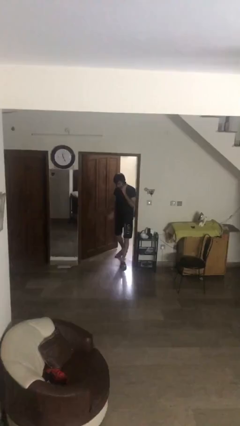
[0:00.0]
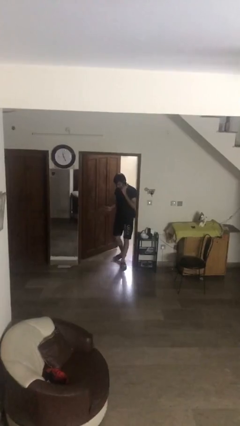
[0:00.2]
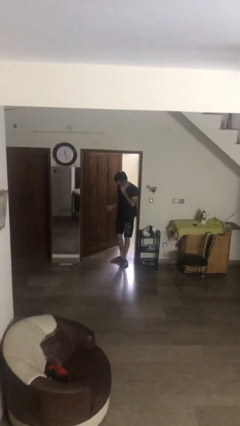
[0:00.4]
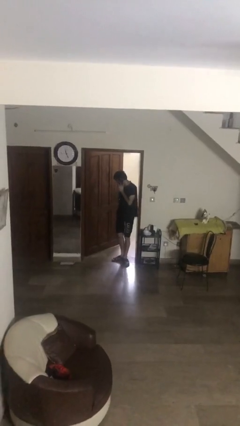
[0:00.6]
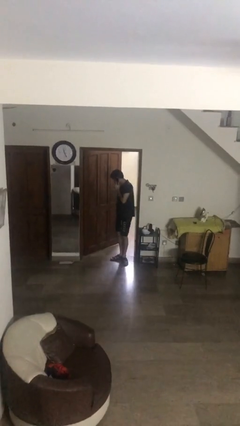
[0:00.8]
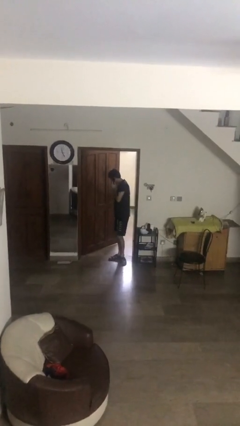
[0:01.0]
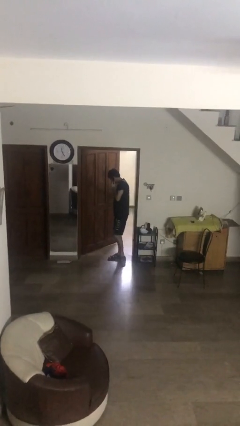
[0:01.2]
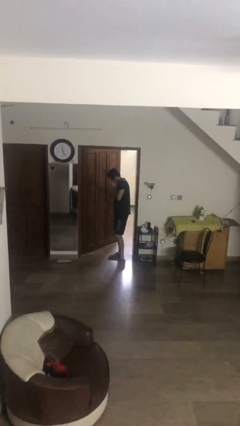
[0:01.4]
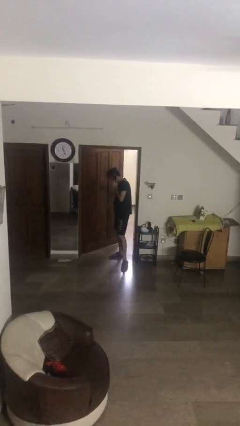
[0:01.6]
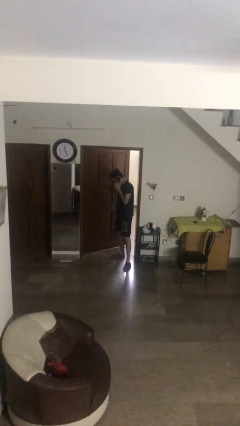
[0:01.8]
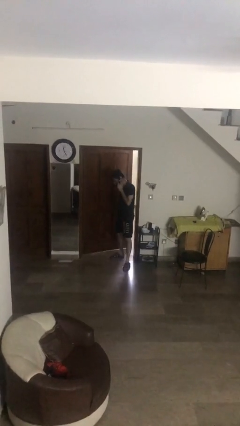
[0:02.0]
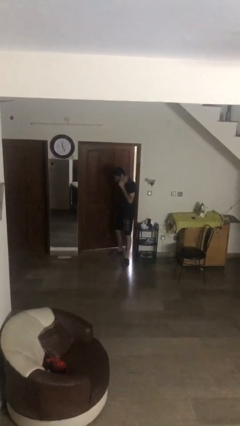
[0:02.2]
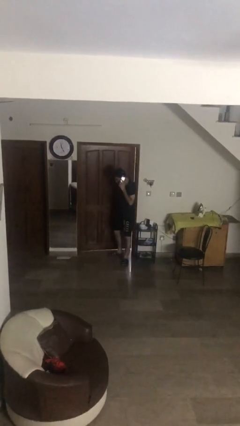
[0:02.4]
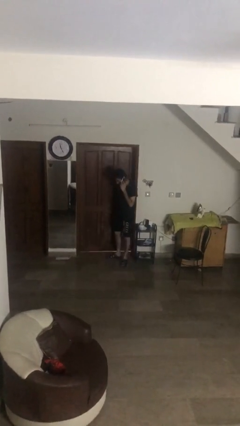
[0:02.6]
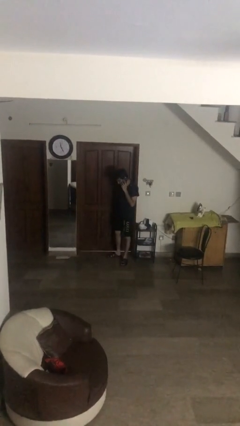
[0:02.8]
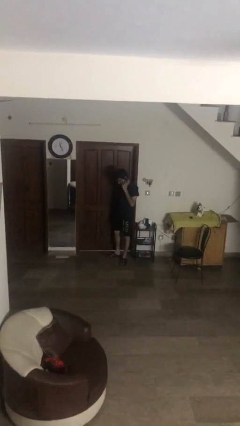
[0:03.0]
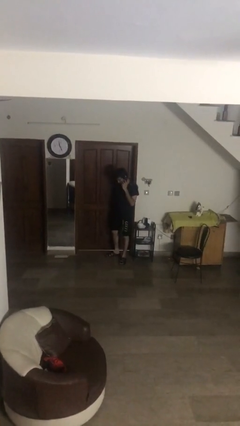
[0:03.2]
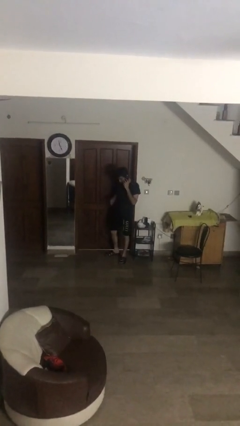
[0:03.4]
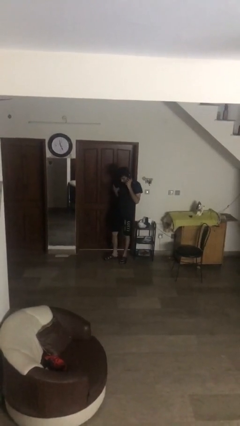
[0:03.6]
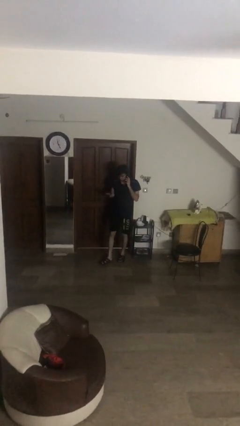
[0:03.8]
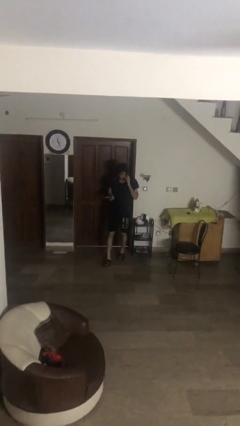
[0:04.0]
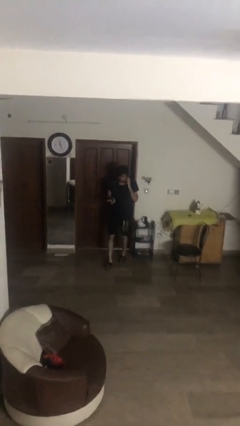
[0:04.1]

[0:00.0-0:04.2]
person closes facility door

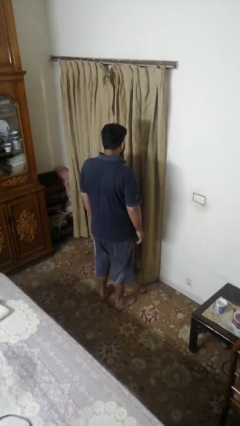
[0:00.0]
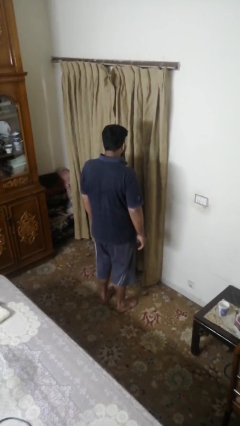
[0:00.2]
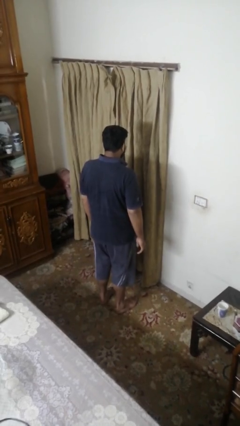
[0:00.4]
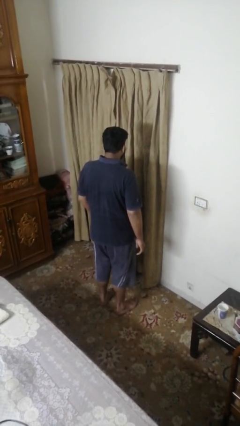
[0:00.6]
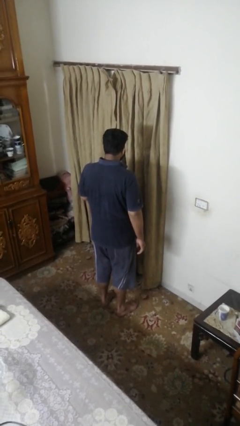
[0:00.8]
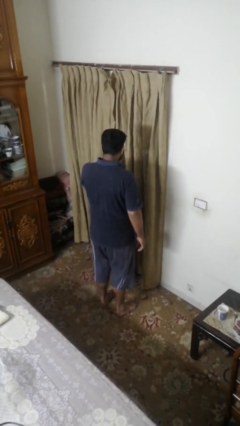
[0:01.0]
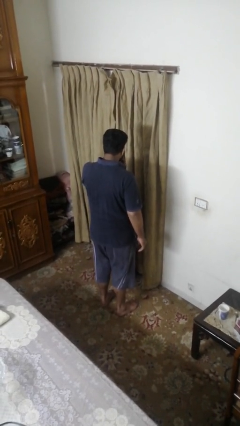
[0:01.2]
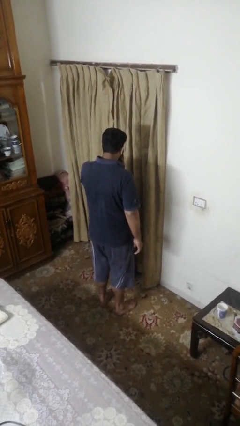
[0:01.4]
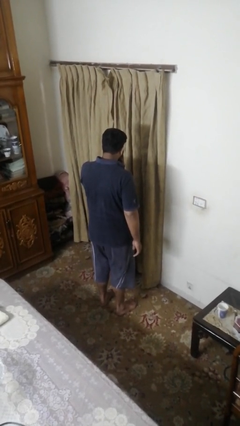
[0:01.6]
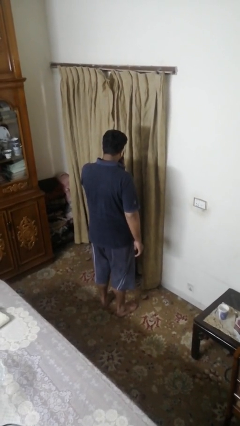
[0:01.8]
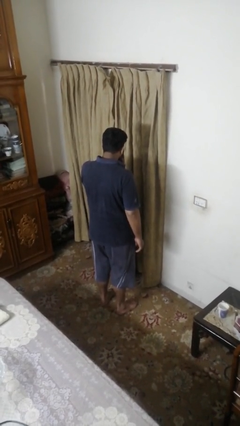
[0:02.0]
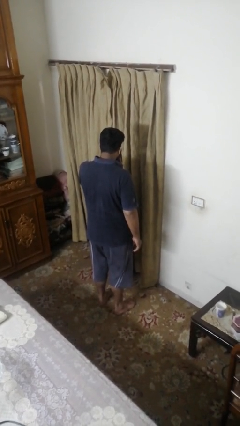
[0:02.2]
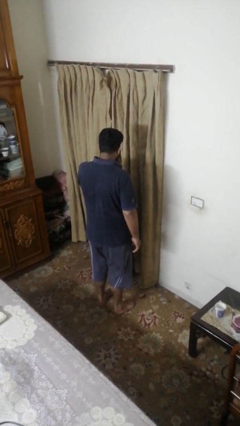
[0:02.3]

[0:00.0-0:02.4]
person gestures be quiet

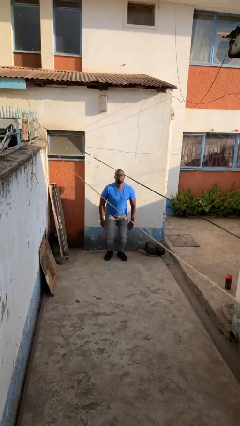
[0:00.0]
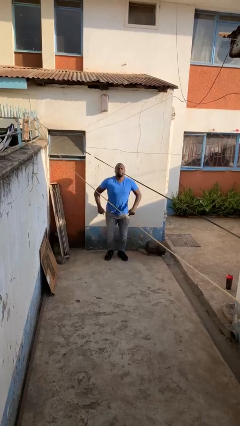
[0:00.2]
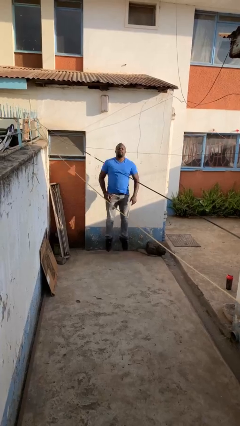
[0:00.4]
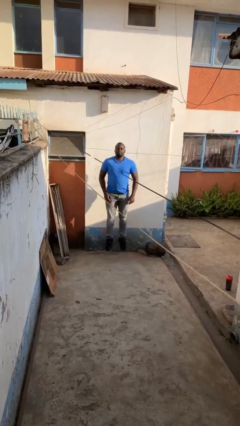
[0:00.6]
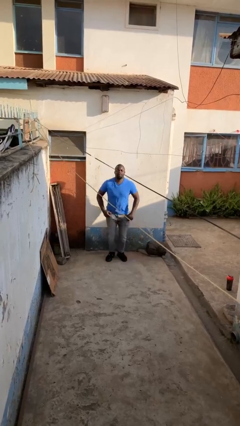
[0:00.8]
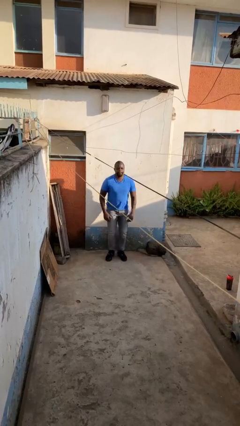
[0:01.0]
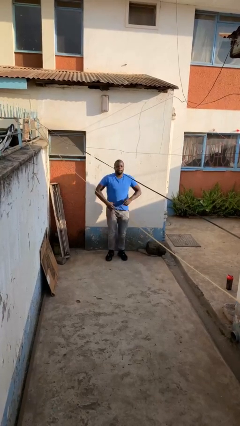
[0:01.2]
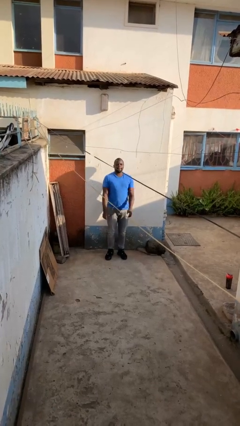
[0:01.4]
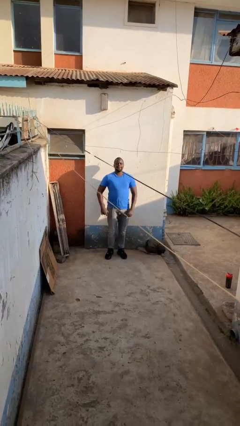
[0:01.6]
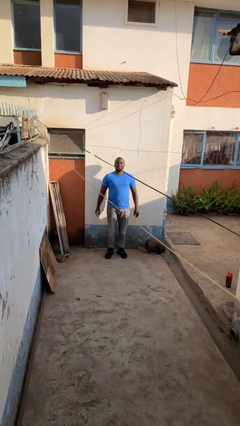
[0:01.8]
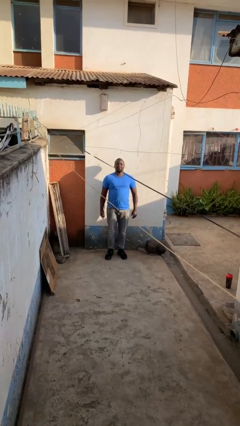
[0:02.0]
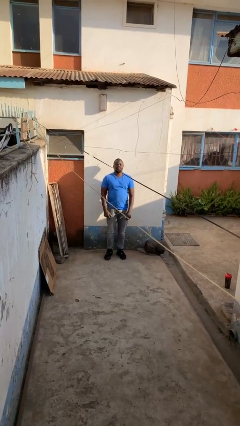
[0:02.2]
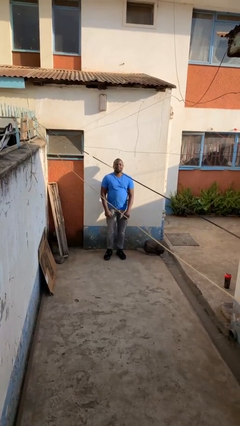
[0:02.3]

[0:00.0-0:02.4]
person jumps

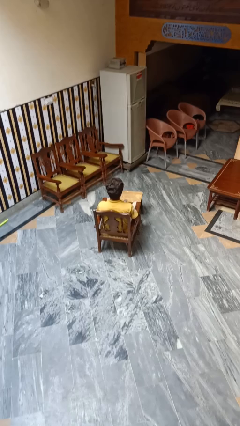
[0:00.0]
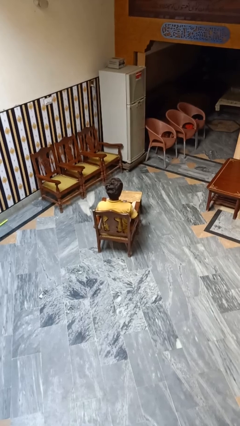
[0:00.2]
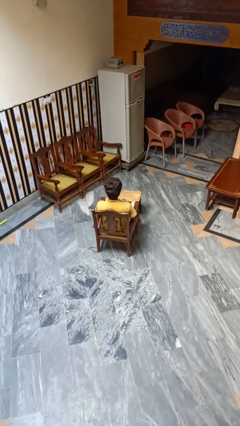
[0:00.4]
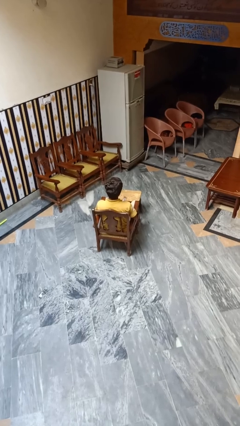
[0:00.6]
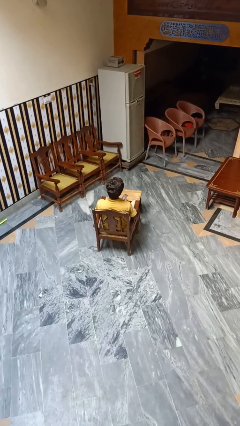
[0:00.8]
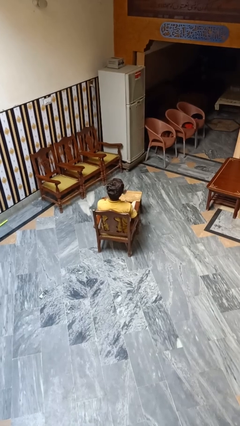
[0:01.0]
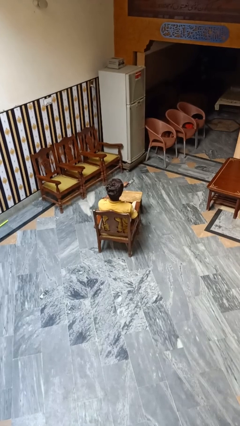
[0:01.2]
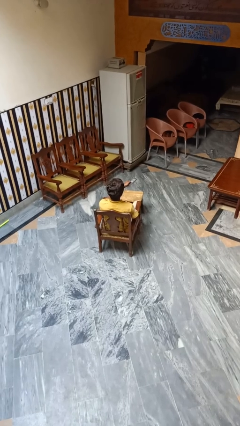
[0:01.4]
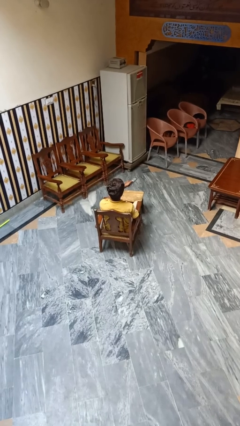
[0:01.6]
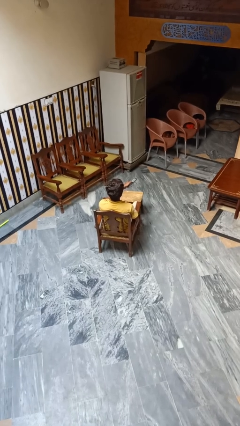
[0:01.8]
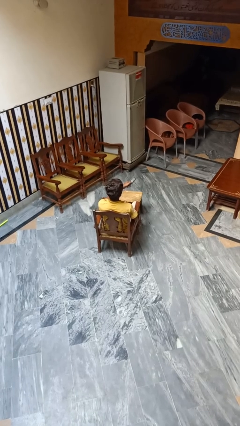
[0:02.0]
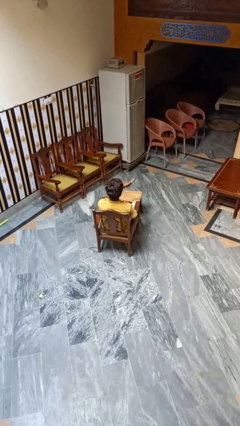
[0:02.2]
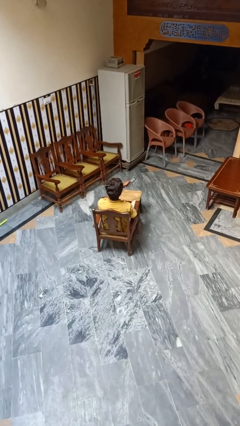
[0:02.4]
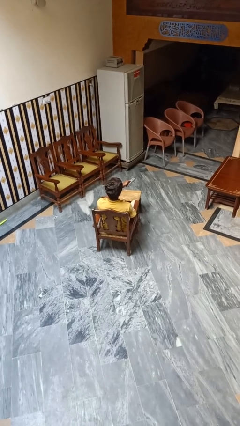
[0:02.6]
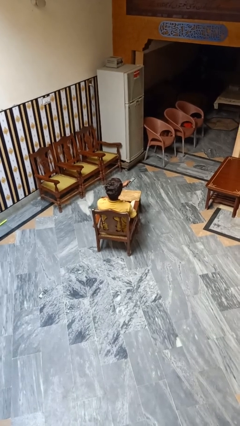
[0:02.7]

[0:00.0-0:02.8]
person uses television remote

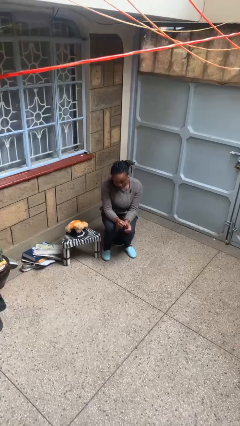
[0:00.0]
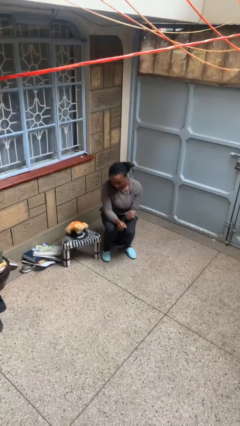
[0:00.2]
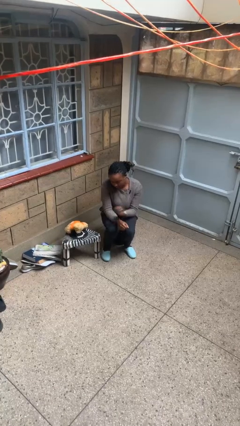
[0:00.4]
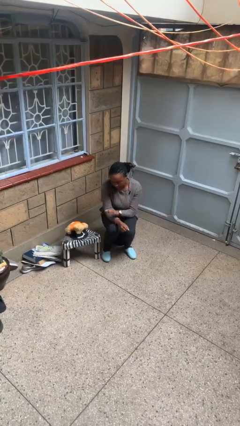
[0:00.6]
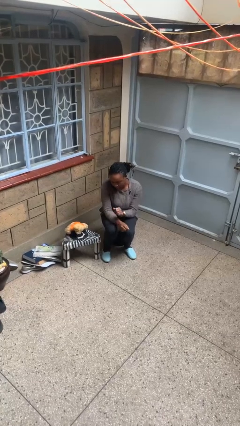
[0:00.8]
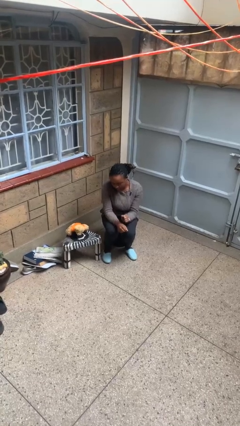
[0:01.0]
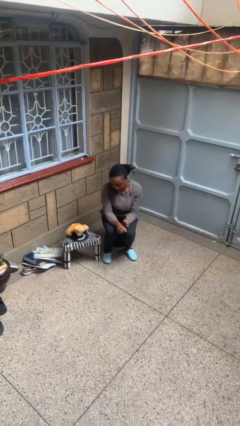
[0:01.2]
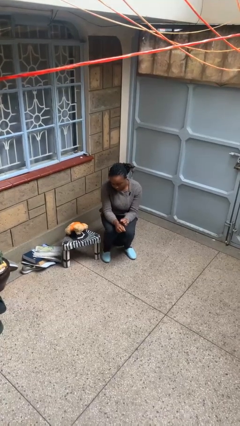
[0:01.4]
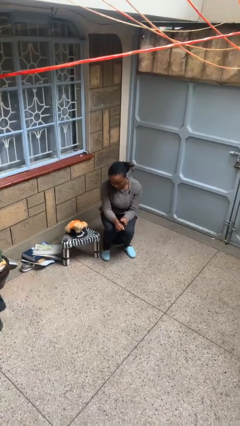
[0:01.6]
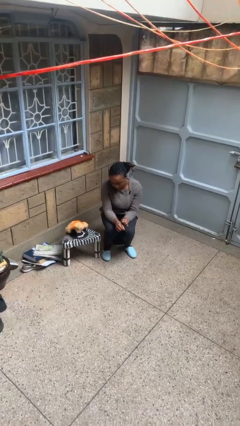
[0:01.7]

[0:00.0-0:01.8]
person swats bug

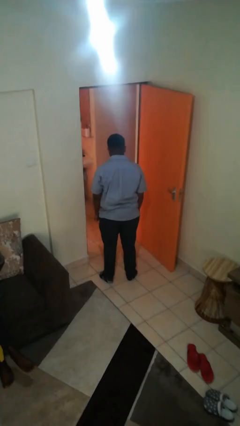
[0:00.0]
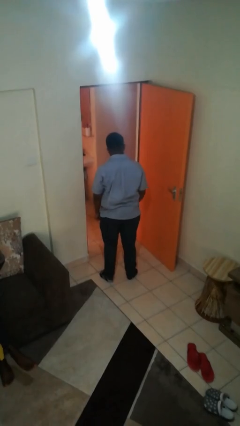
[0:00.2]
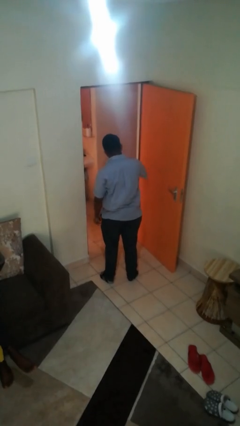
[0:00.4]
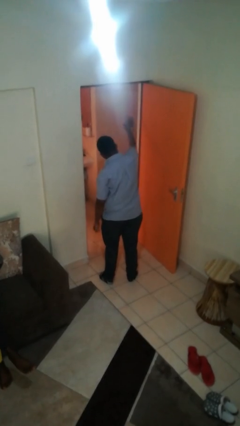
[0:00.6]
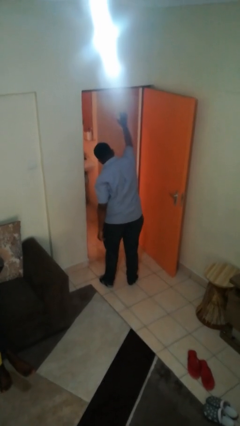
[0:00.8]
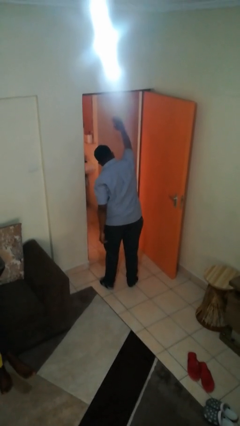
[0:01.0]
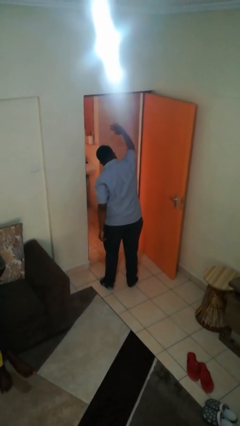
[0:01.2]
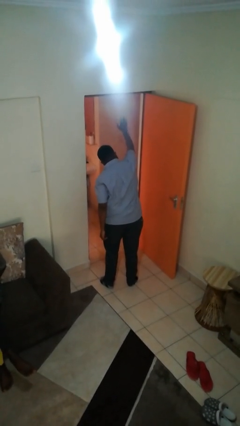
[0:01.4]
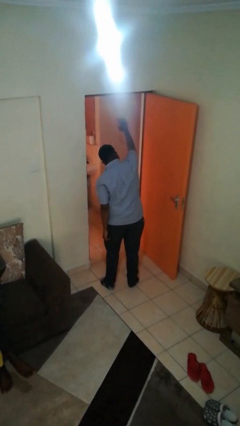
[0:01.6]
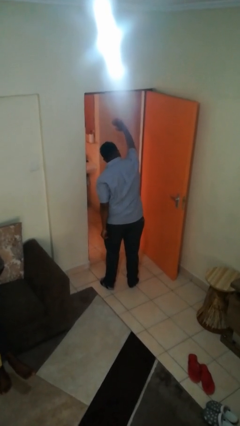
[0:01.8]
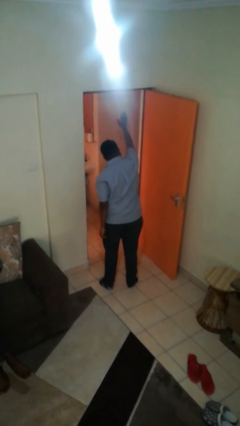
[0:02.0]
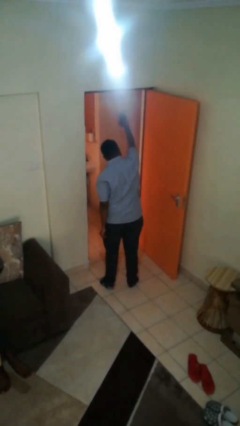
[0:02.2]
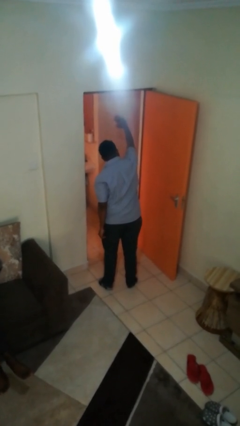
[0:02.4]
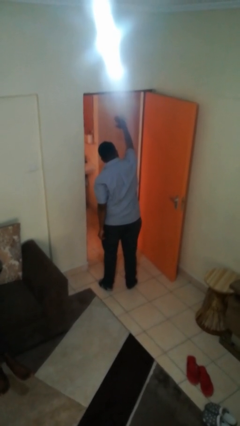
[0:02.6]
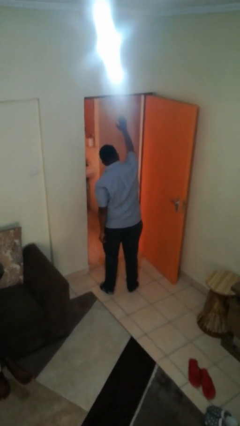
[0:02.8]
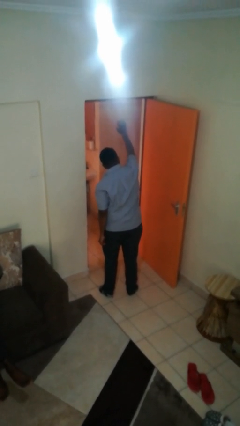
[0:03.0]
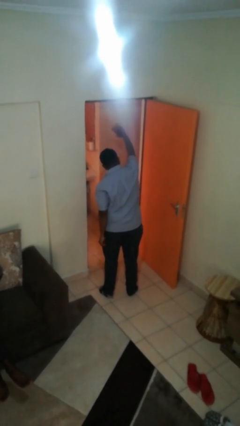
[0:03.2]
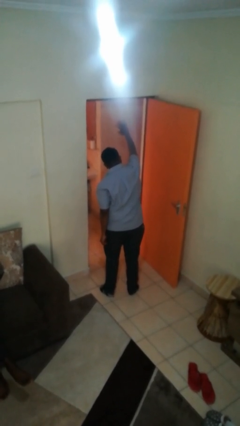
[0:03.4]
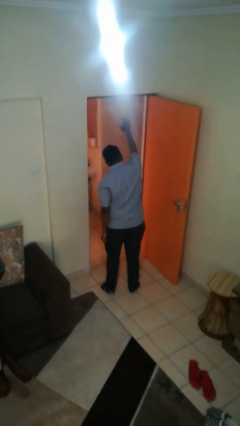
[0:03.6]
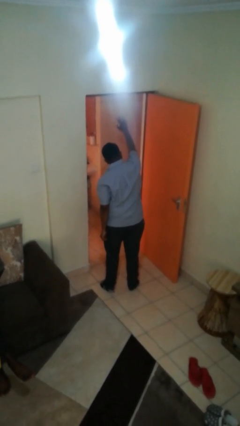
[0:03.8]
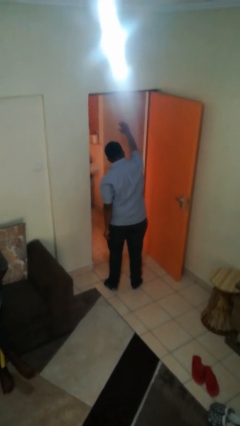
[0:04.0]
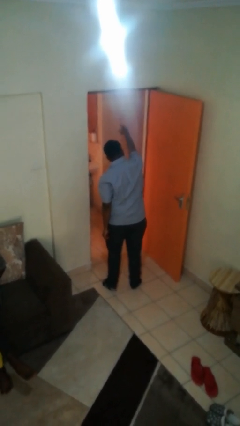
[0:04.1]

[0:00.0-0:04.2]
person waves at person
